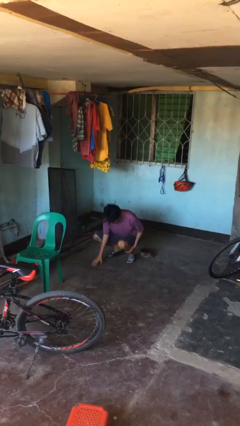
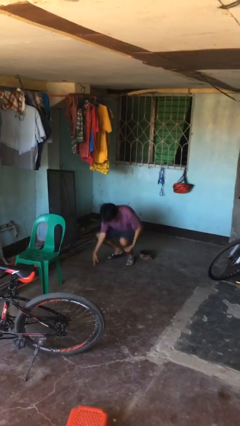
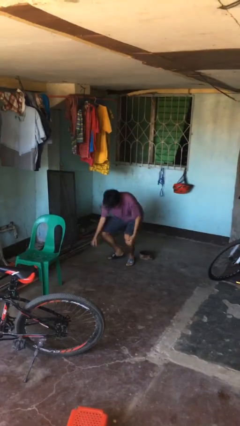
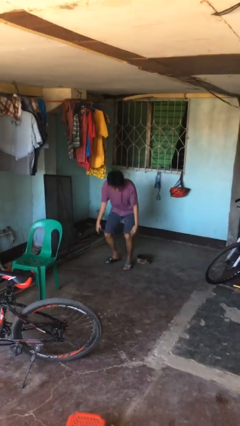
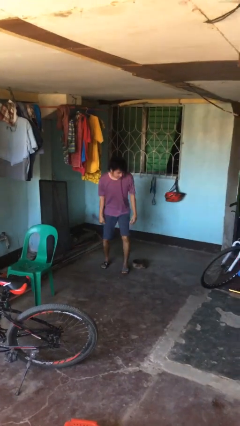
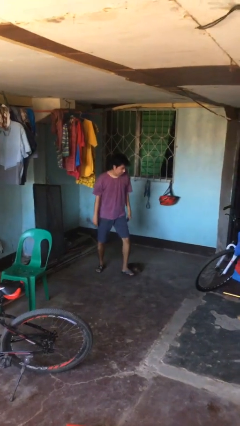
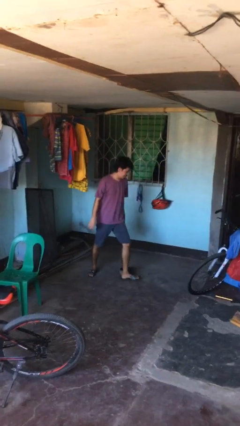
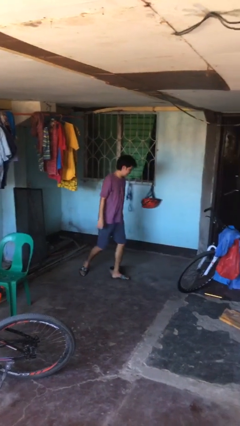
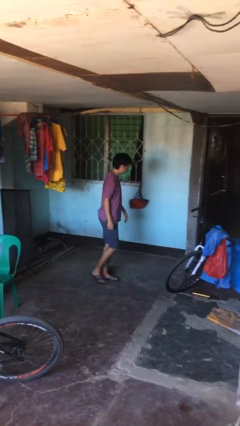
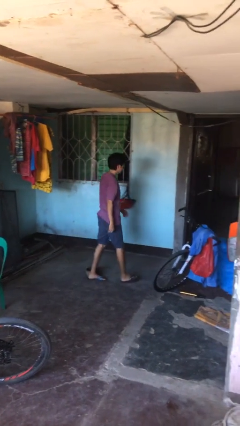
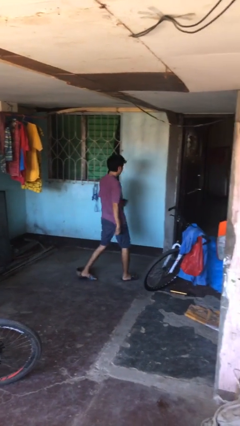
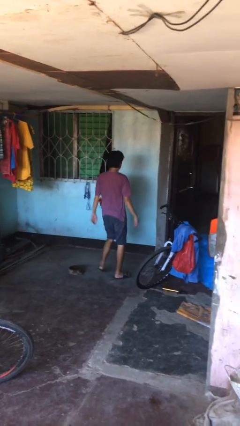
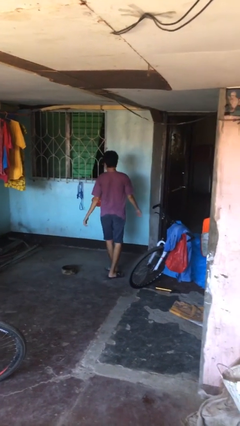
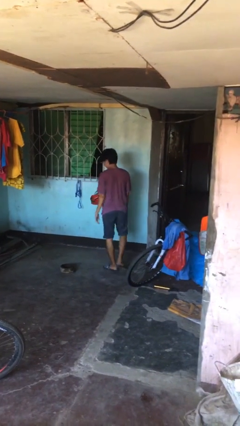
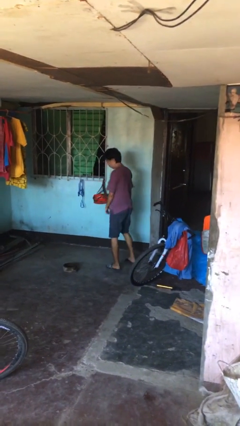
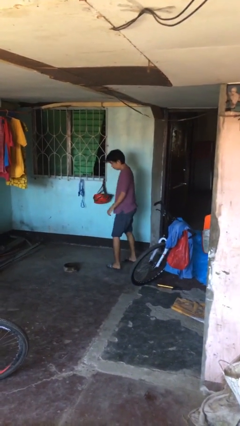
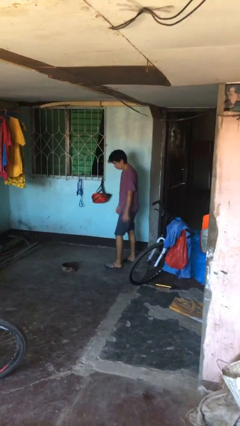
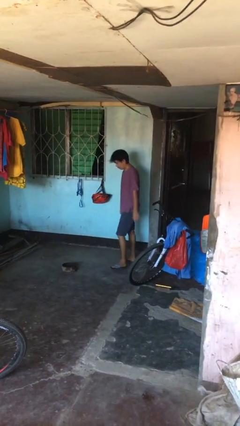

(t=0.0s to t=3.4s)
person stands up from floor

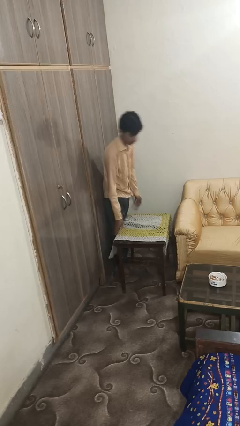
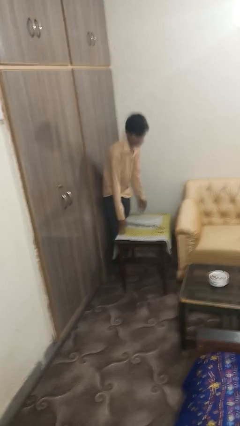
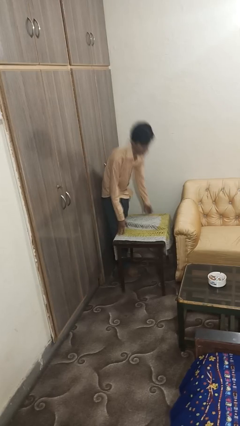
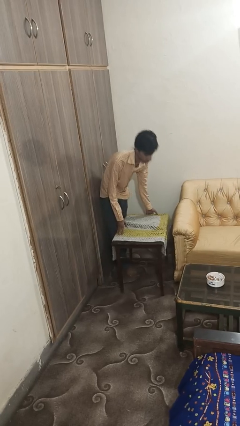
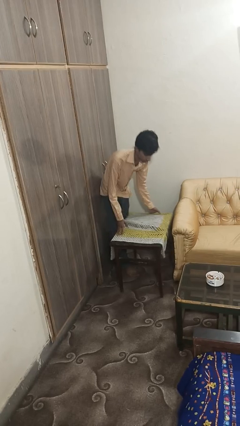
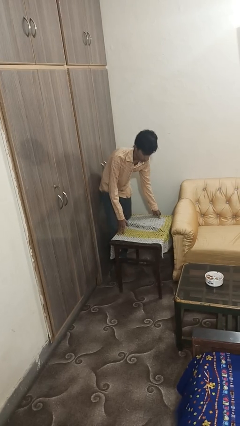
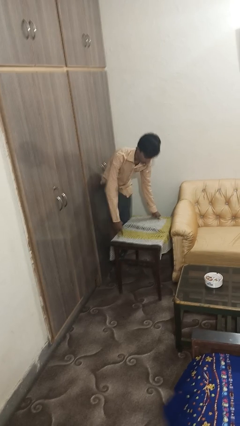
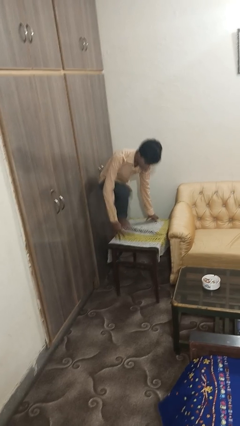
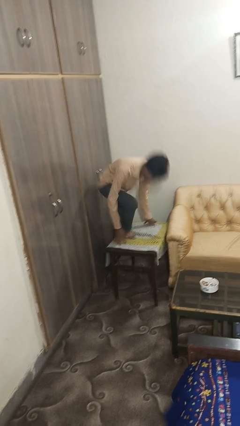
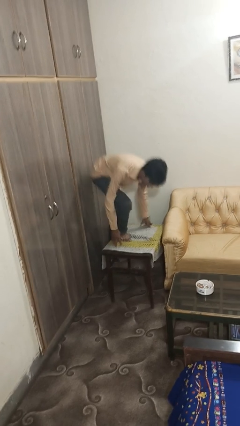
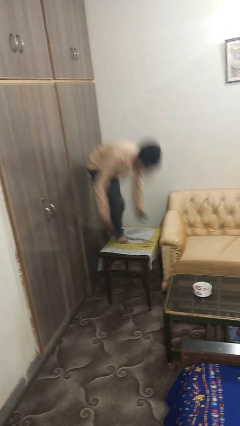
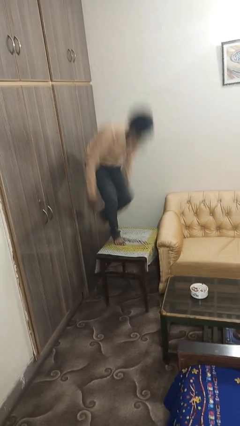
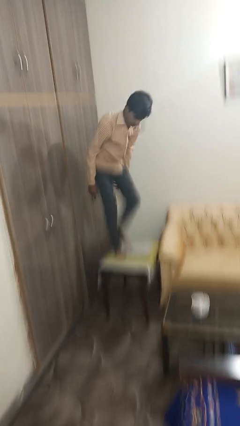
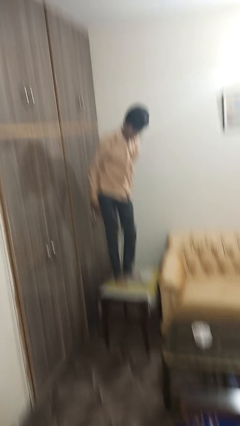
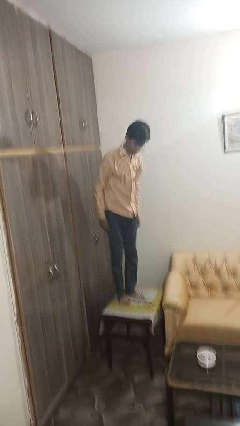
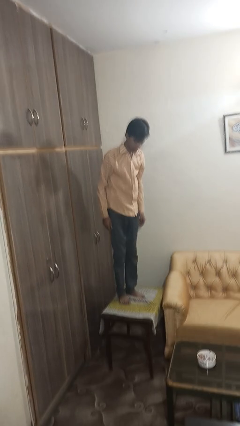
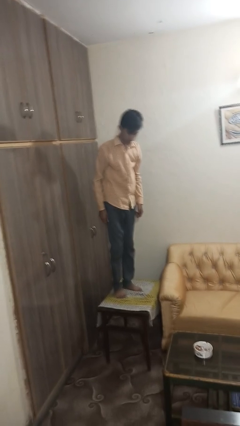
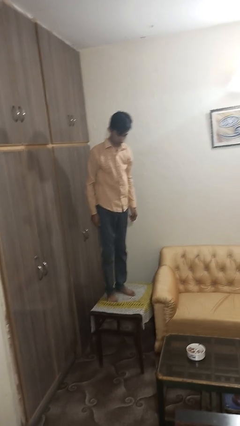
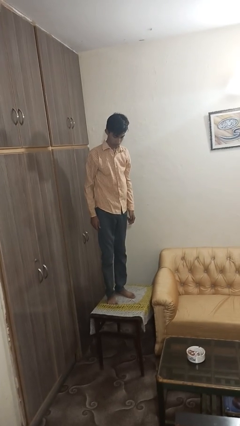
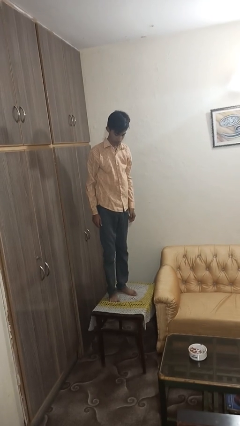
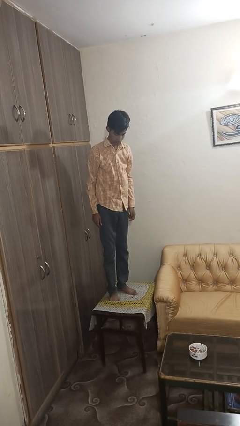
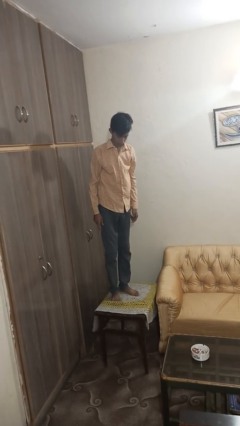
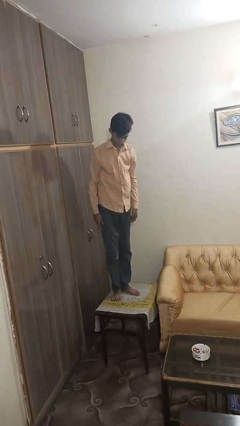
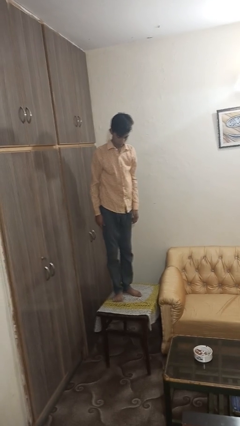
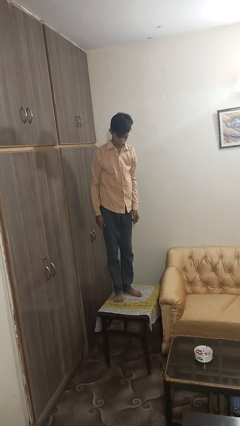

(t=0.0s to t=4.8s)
person climbs on table

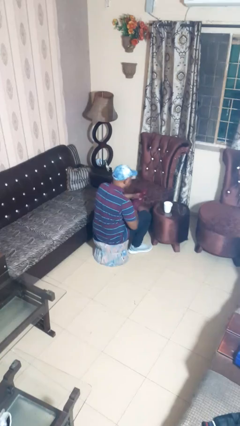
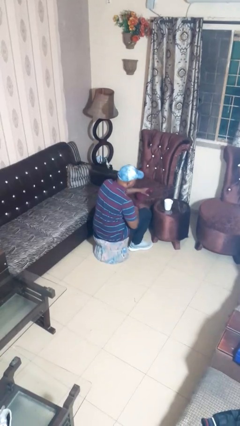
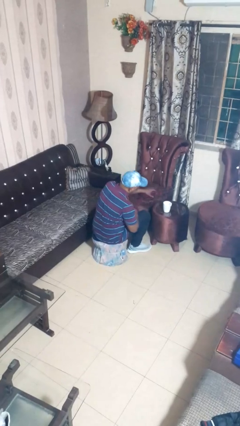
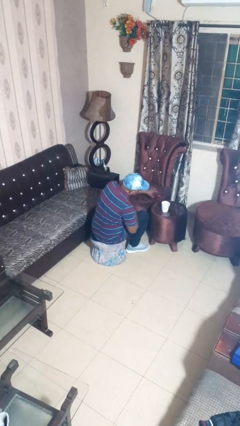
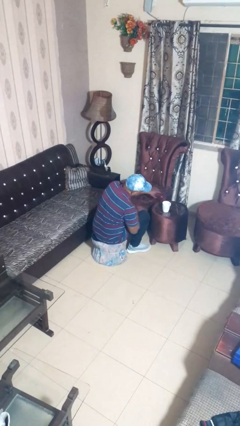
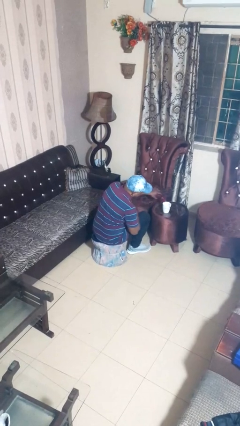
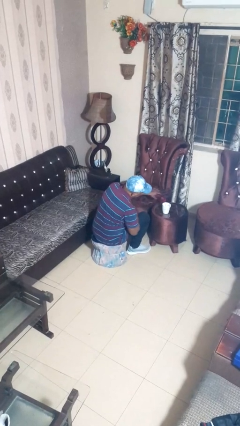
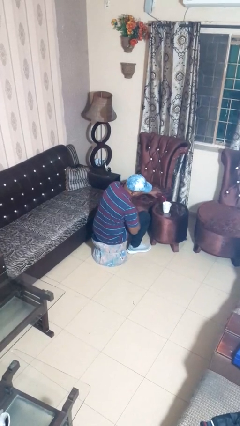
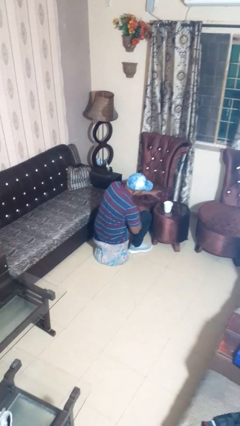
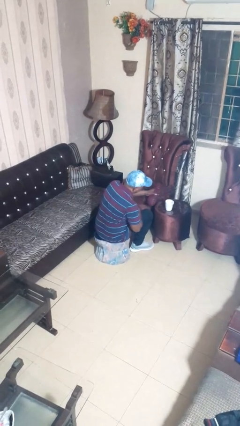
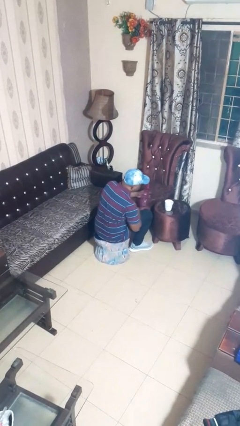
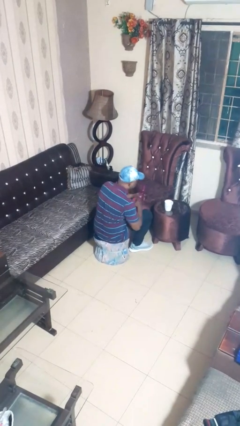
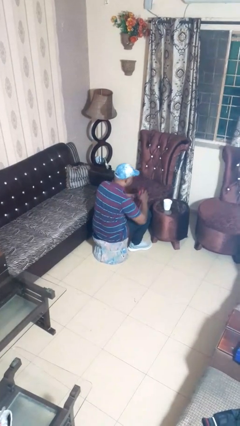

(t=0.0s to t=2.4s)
person pours liquid into cup

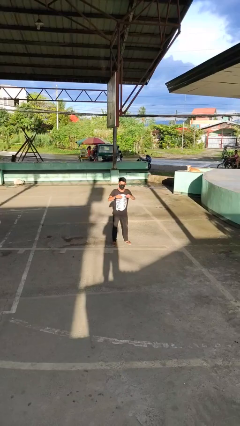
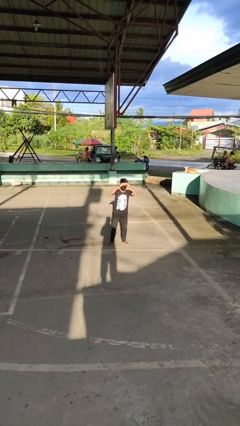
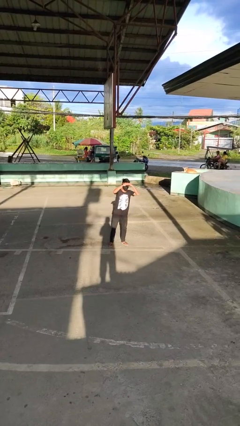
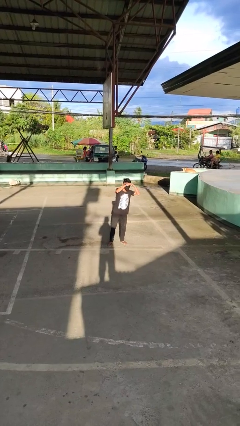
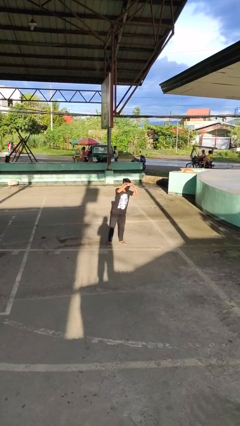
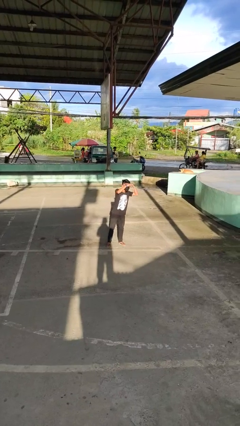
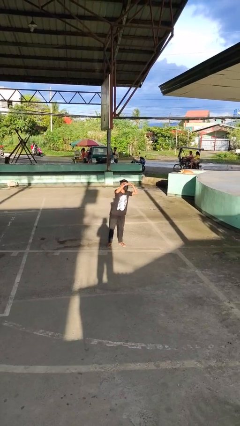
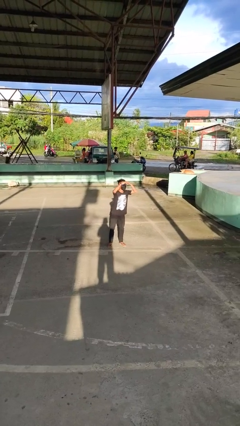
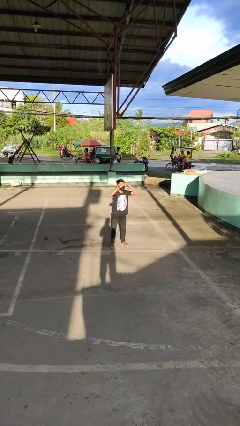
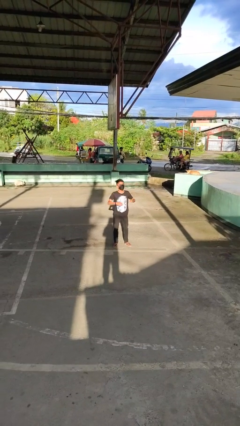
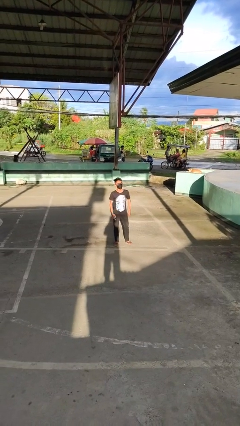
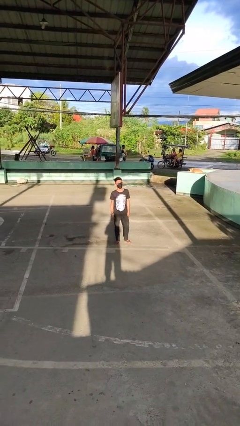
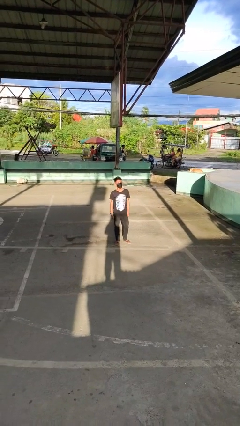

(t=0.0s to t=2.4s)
person shades eyes

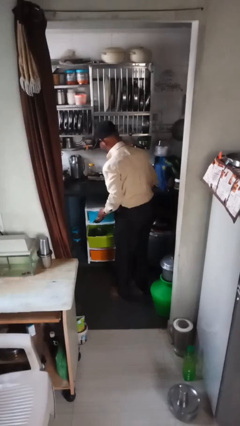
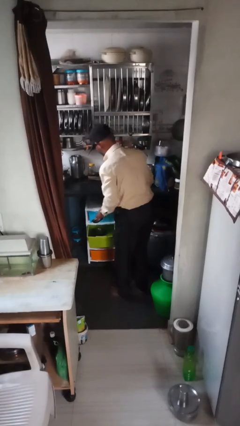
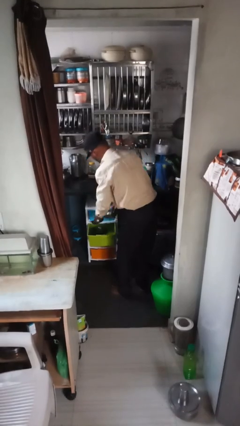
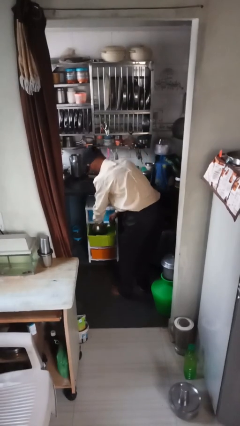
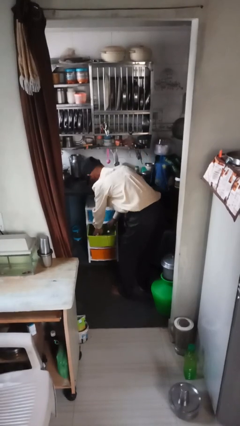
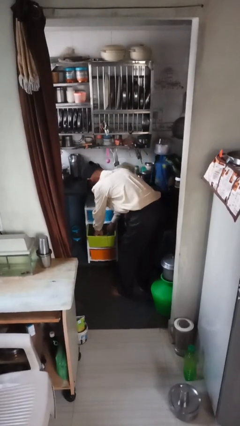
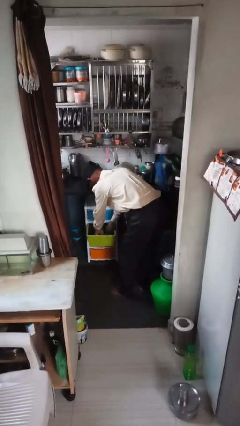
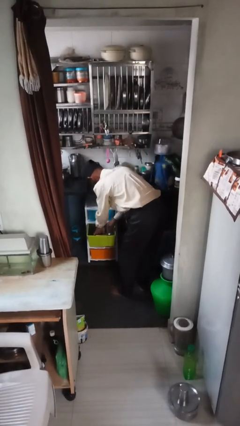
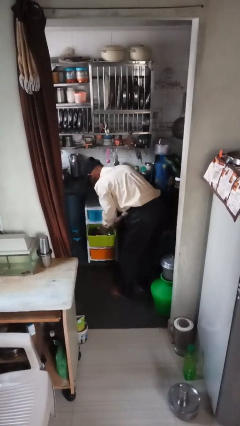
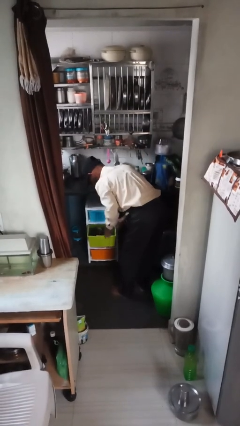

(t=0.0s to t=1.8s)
person puts object into kitchen drawer

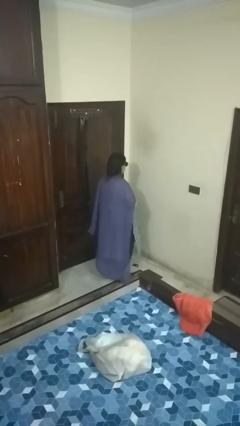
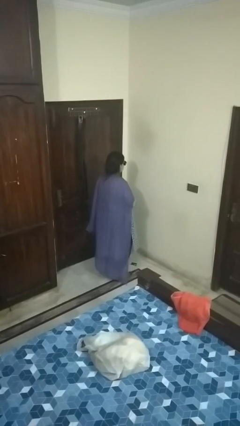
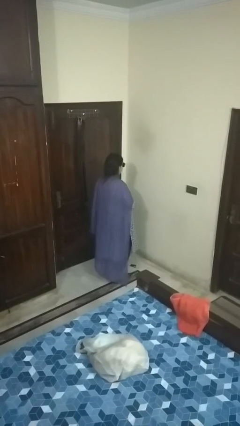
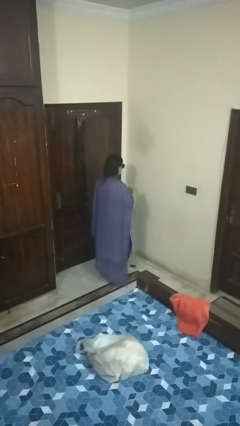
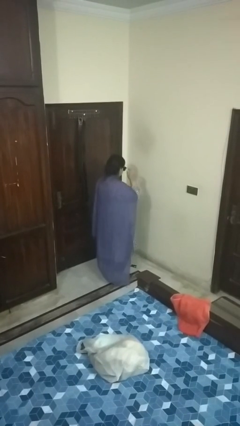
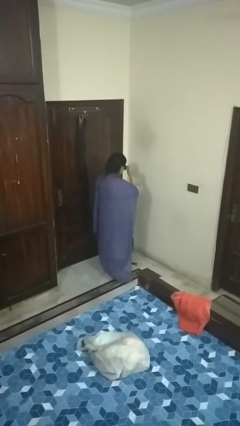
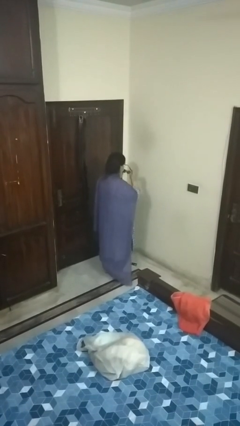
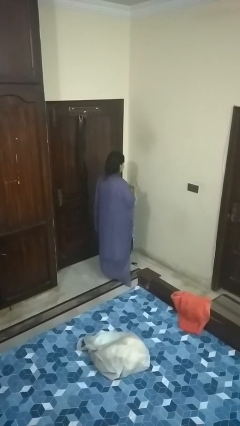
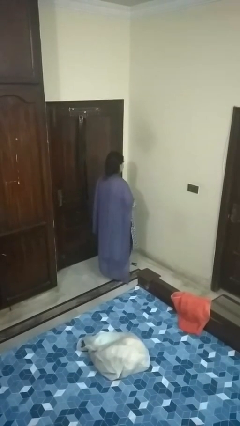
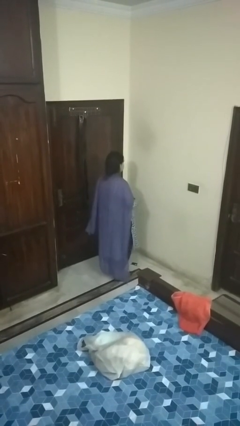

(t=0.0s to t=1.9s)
person takes off sunglasses

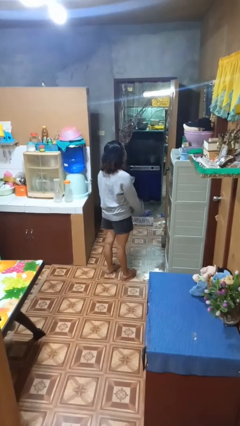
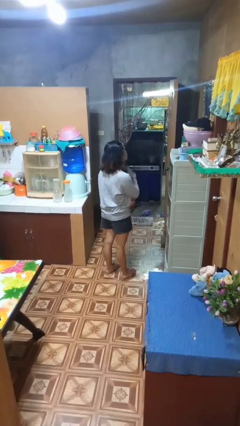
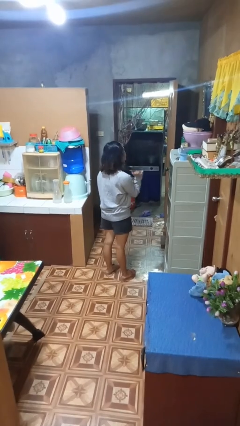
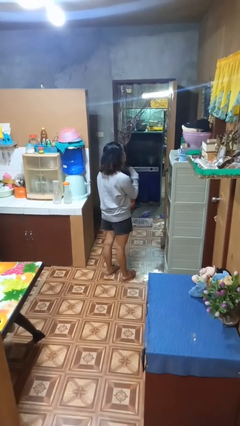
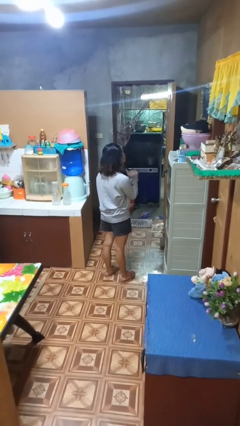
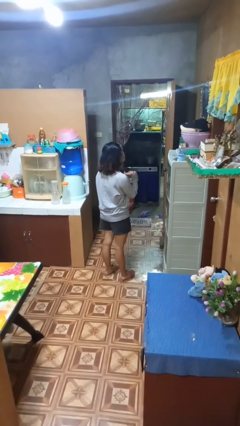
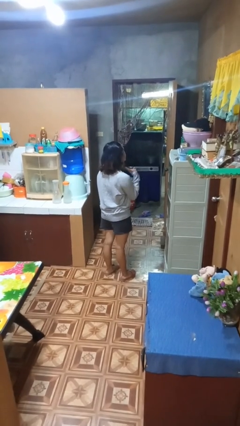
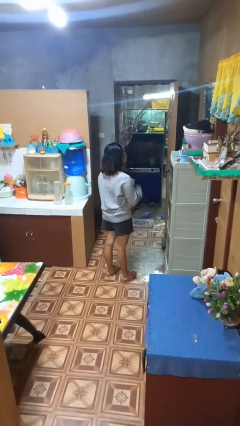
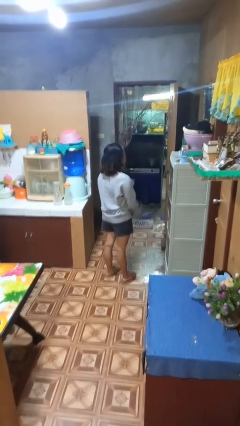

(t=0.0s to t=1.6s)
person gestures cut
